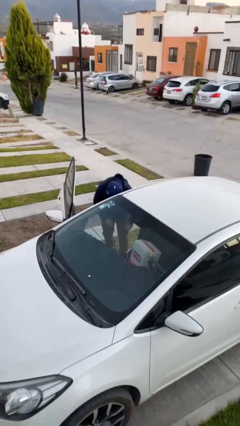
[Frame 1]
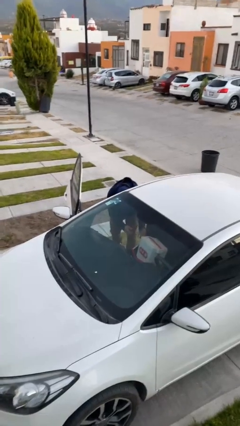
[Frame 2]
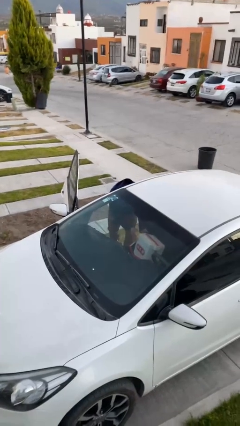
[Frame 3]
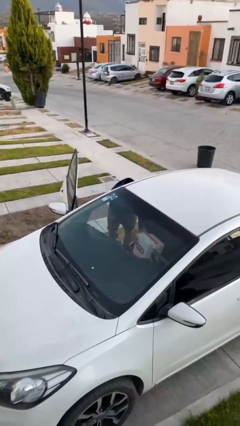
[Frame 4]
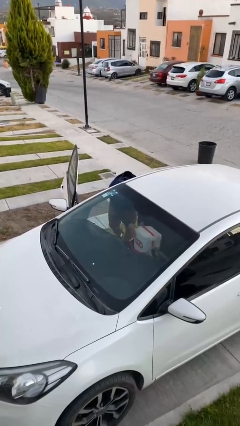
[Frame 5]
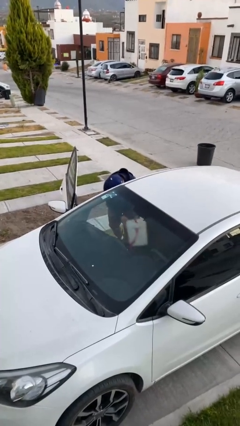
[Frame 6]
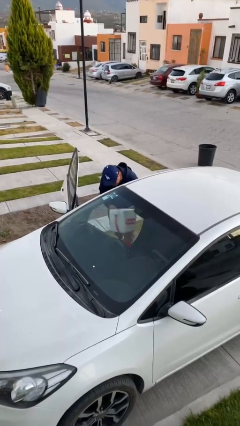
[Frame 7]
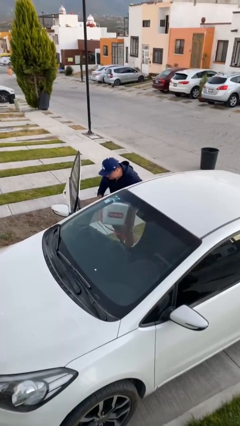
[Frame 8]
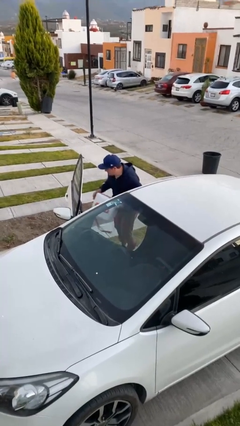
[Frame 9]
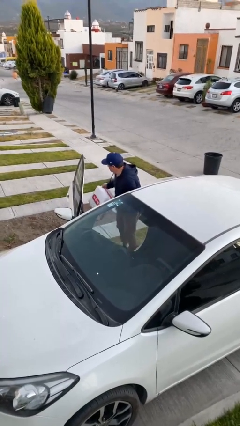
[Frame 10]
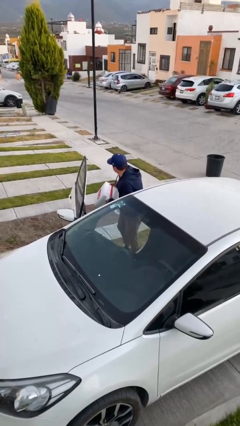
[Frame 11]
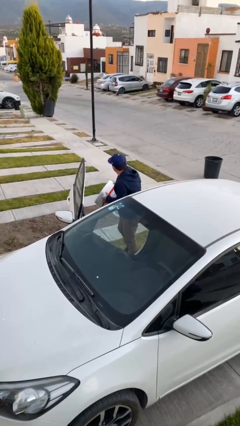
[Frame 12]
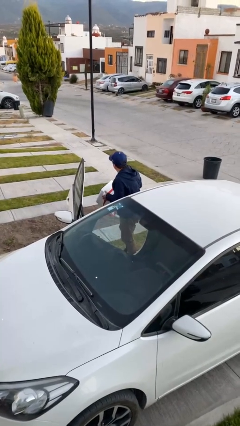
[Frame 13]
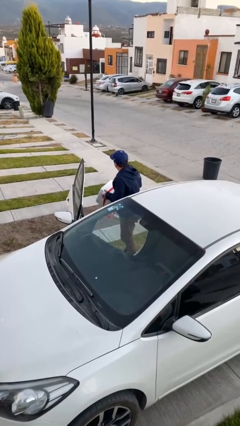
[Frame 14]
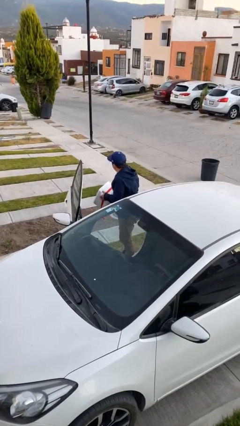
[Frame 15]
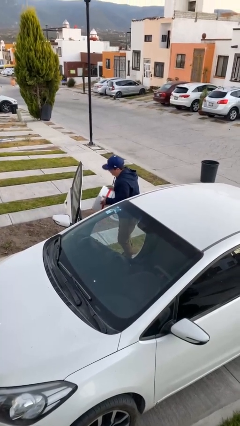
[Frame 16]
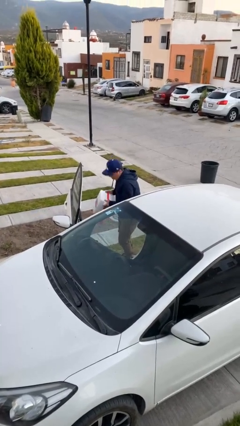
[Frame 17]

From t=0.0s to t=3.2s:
person unloads car

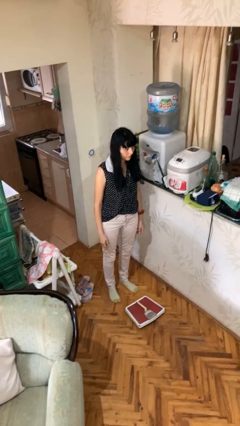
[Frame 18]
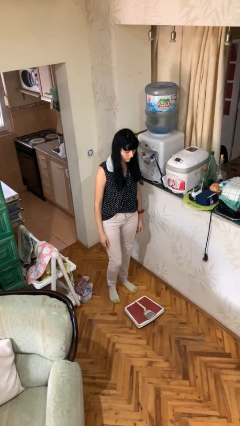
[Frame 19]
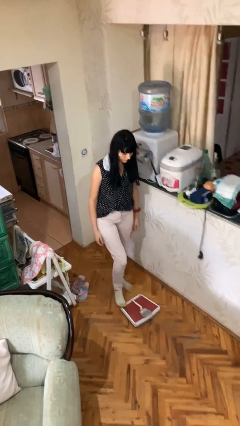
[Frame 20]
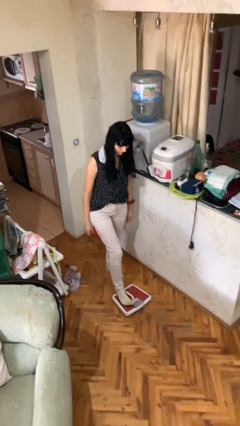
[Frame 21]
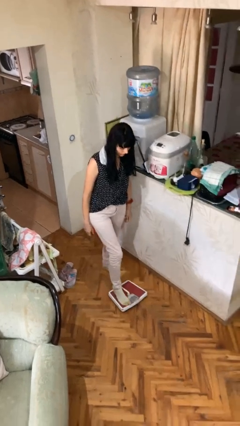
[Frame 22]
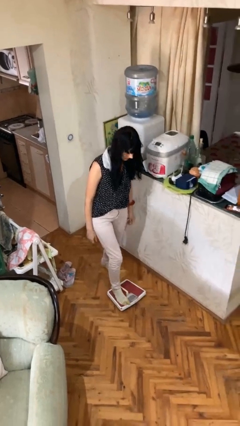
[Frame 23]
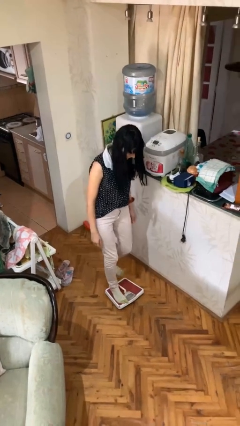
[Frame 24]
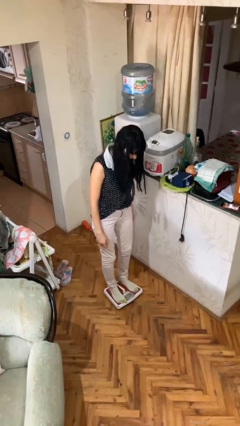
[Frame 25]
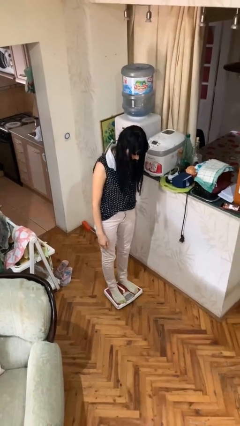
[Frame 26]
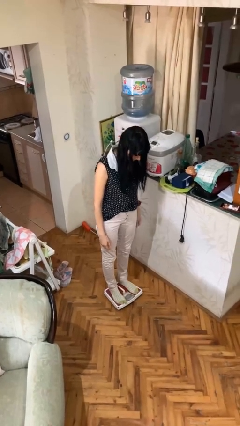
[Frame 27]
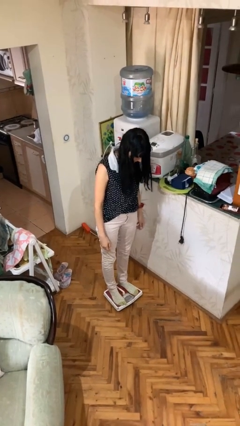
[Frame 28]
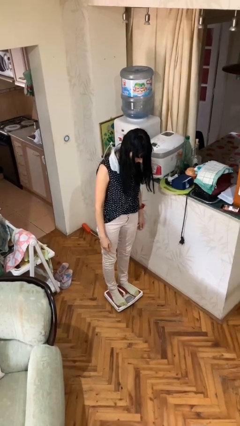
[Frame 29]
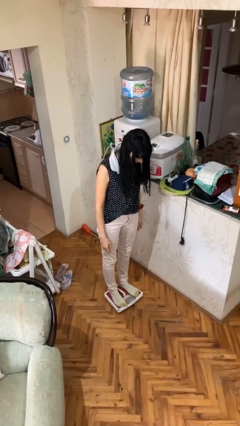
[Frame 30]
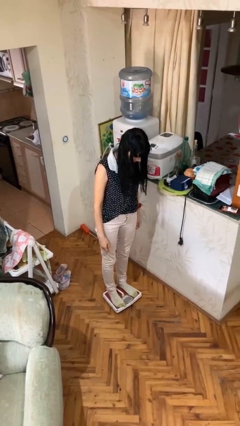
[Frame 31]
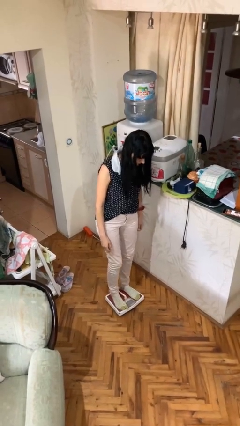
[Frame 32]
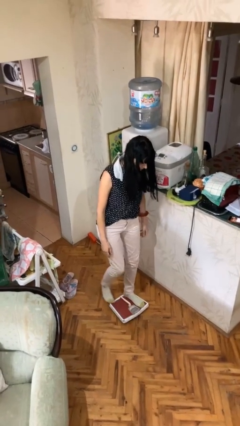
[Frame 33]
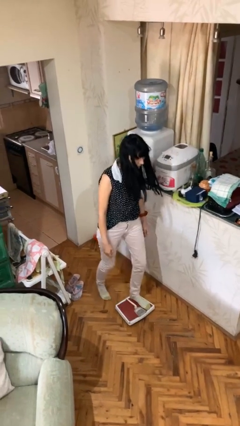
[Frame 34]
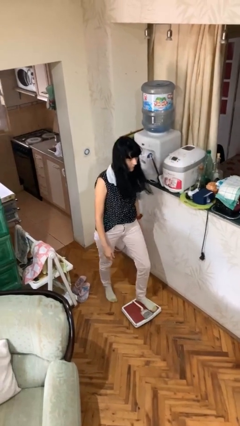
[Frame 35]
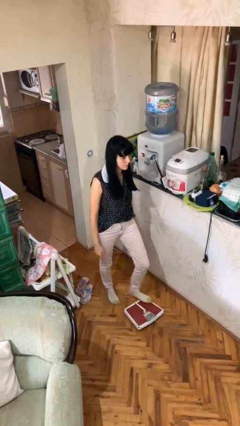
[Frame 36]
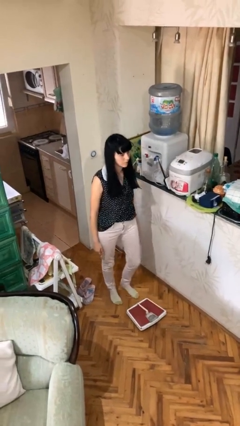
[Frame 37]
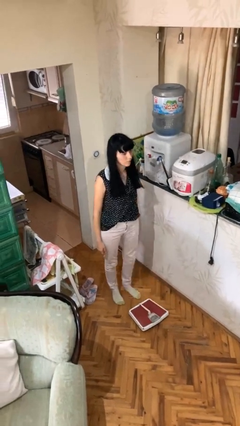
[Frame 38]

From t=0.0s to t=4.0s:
person uses bodyweight scale

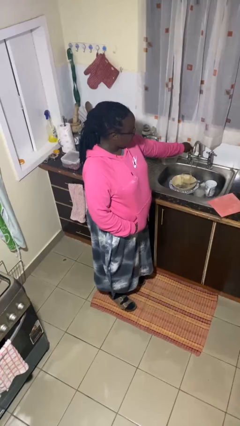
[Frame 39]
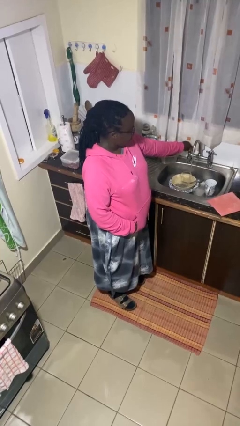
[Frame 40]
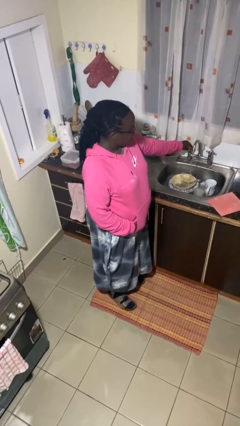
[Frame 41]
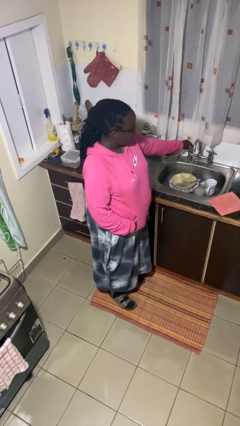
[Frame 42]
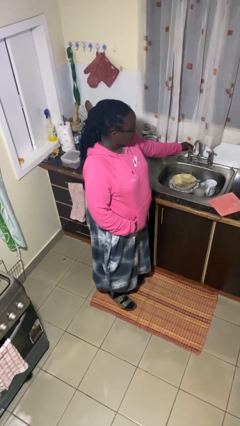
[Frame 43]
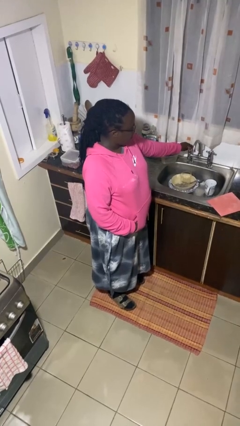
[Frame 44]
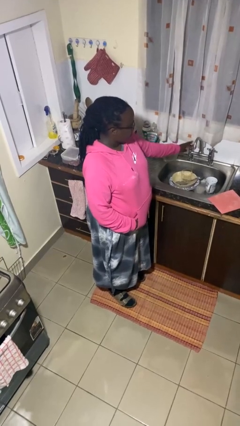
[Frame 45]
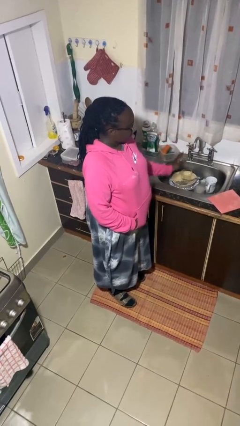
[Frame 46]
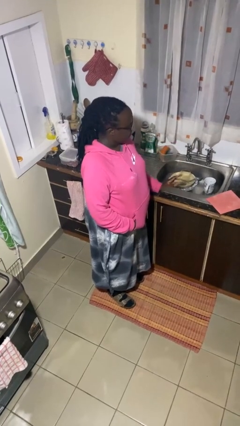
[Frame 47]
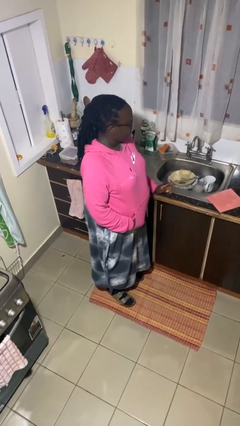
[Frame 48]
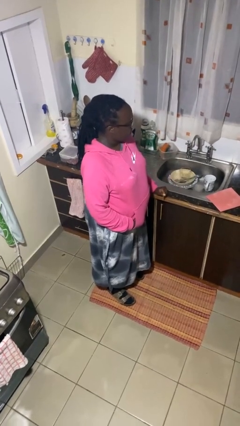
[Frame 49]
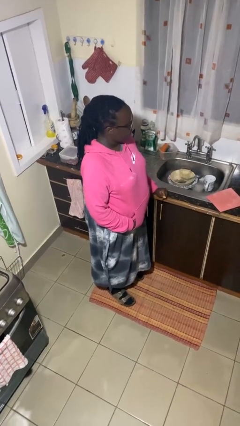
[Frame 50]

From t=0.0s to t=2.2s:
person turns off faucet

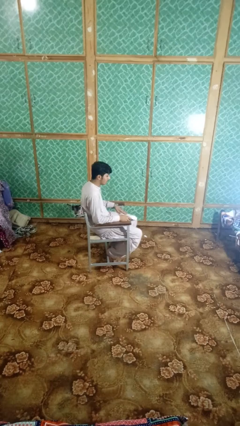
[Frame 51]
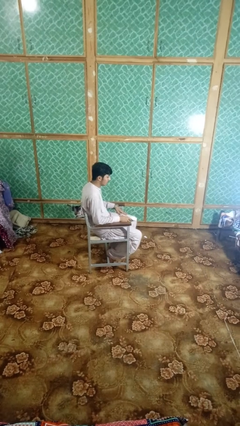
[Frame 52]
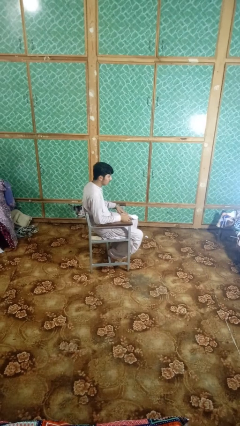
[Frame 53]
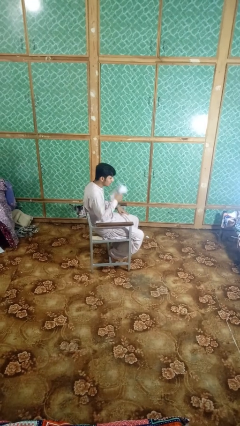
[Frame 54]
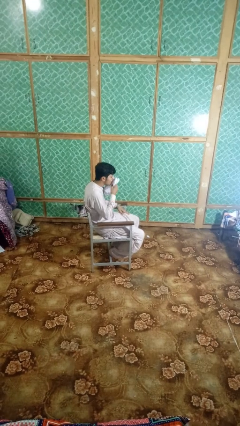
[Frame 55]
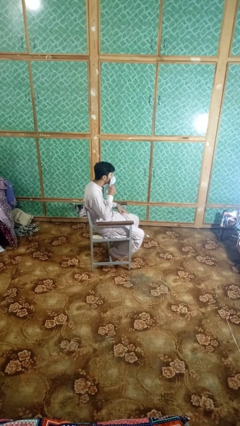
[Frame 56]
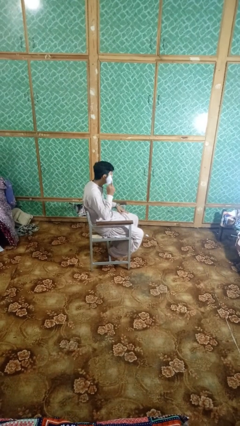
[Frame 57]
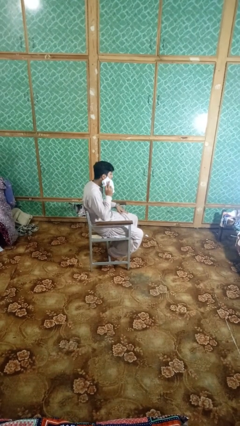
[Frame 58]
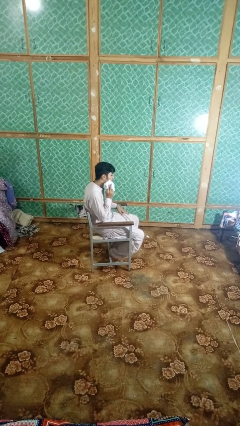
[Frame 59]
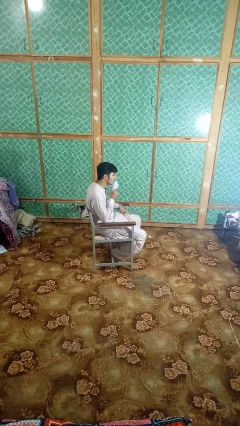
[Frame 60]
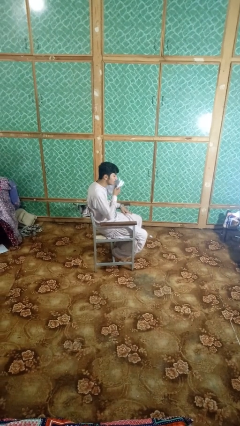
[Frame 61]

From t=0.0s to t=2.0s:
person wipes mouth with napkin

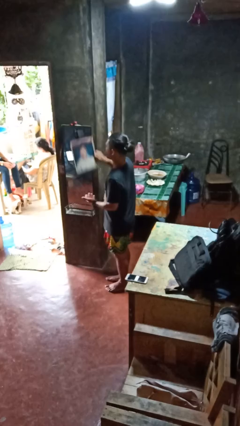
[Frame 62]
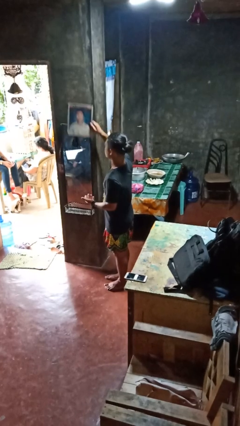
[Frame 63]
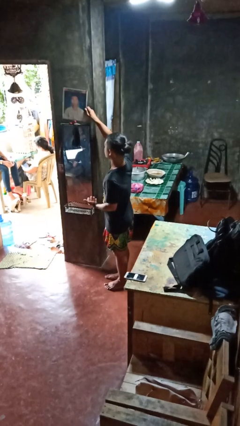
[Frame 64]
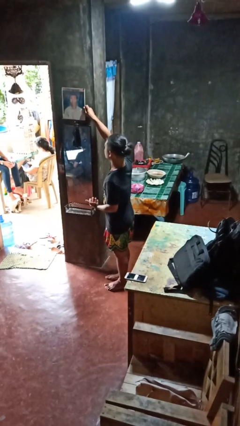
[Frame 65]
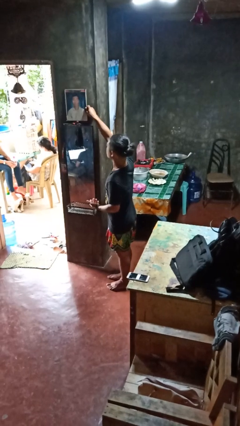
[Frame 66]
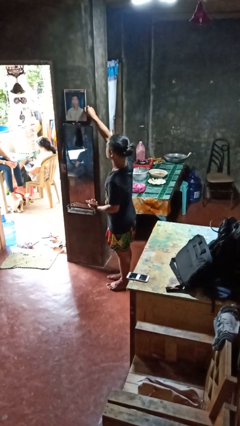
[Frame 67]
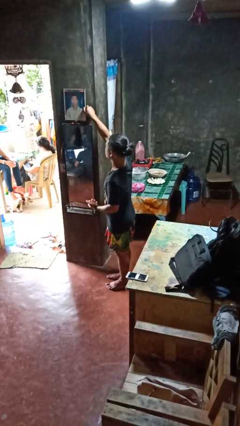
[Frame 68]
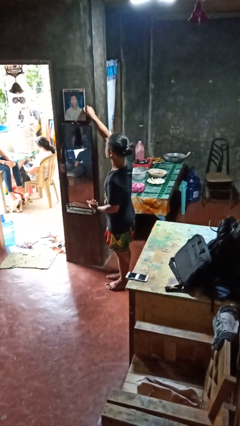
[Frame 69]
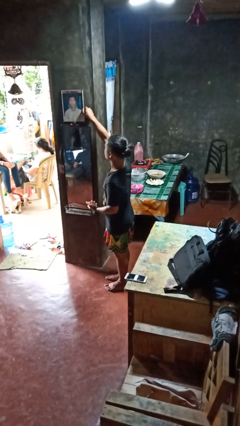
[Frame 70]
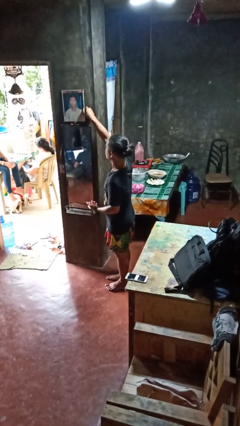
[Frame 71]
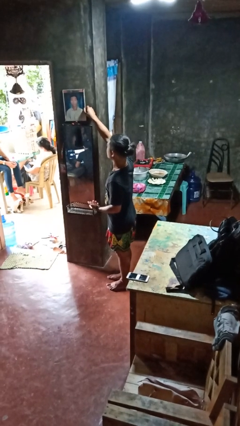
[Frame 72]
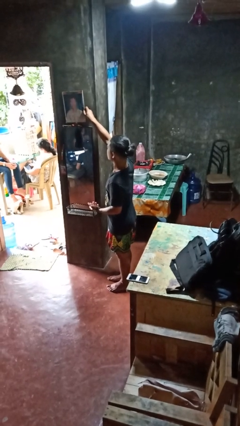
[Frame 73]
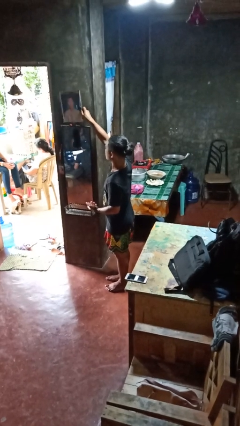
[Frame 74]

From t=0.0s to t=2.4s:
person puts up picture frame

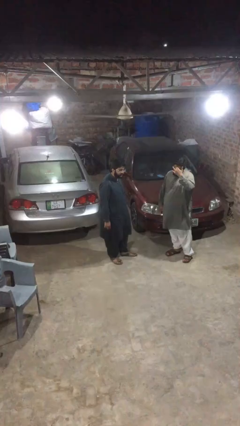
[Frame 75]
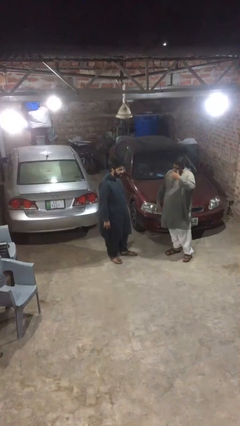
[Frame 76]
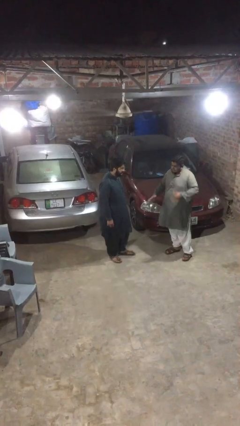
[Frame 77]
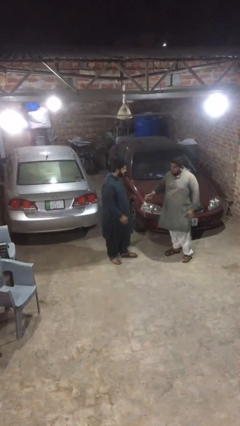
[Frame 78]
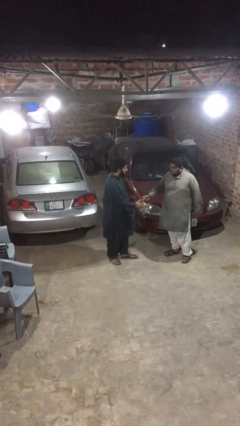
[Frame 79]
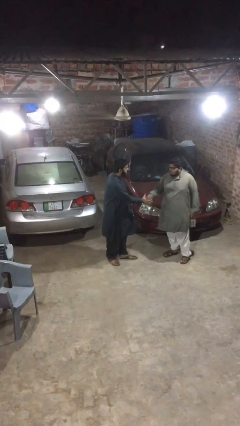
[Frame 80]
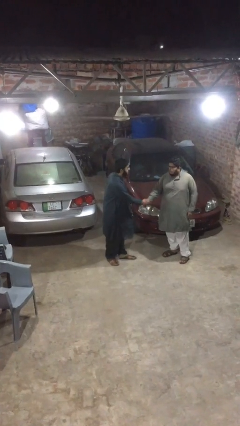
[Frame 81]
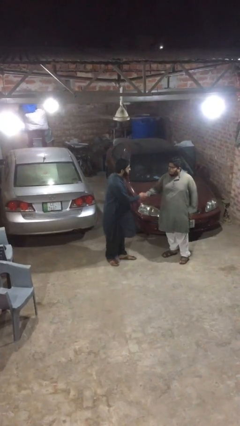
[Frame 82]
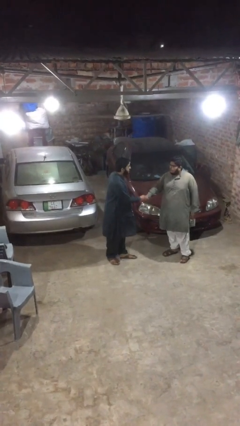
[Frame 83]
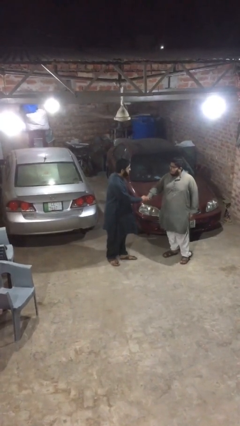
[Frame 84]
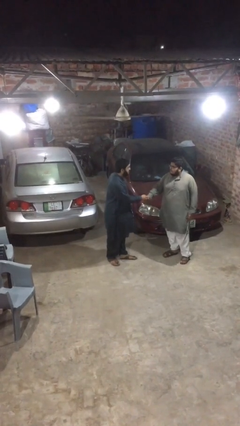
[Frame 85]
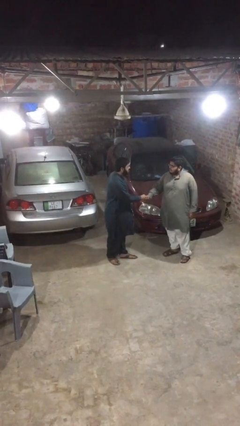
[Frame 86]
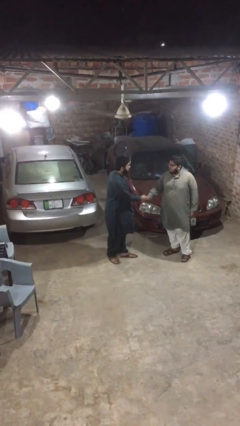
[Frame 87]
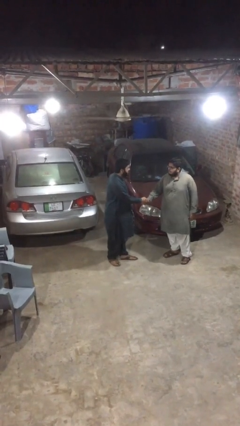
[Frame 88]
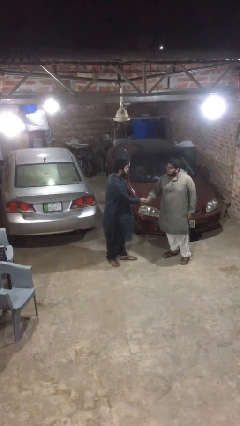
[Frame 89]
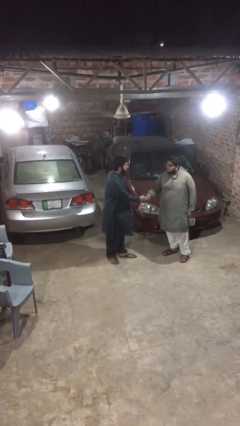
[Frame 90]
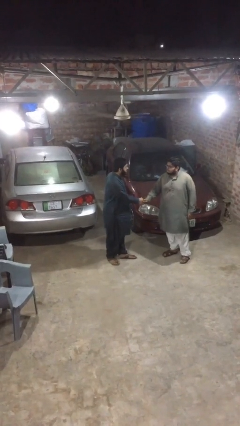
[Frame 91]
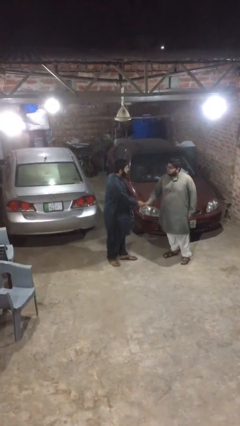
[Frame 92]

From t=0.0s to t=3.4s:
person shakes hand
